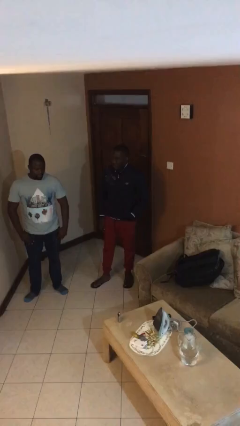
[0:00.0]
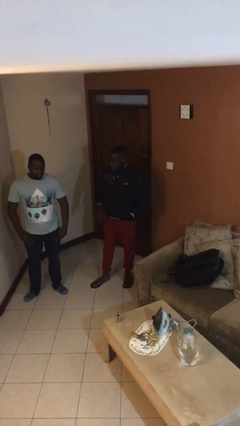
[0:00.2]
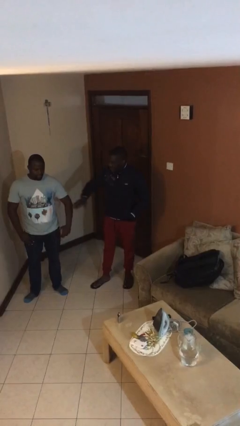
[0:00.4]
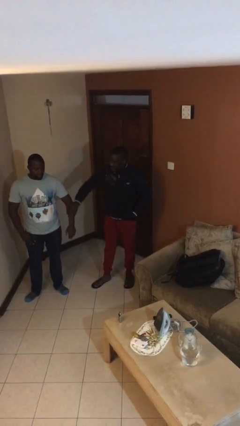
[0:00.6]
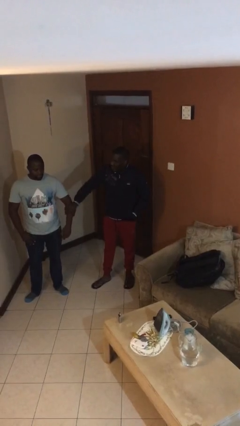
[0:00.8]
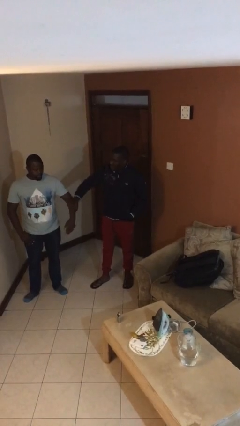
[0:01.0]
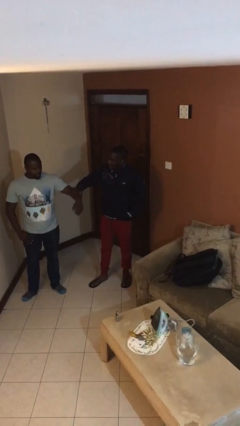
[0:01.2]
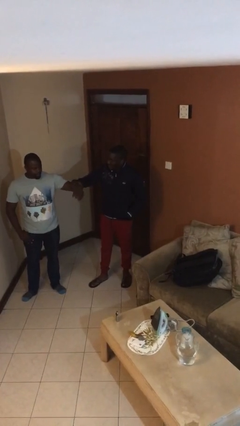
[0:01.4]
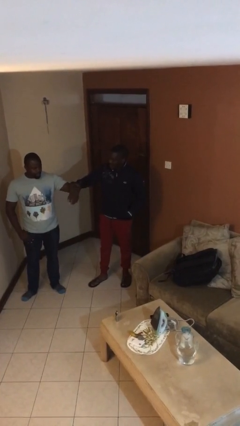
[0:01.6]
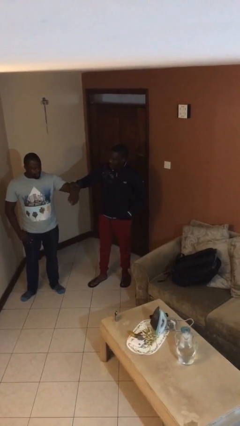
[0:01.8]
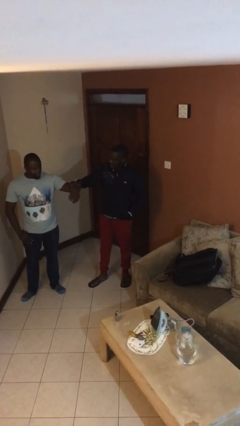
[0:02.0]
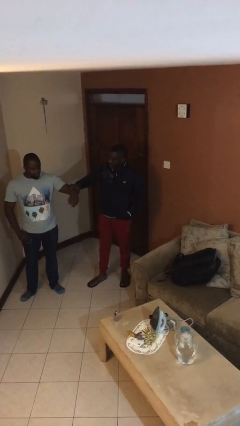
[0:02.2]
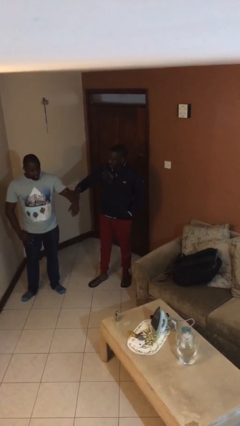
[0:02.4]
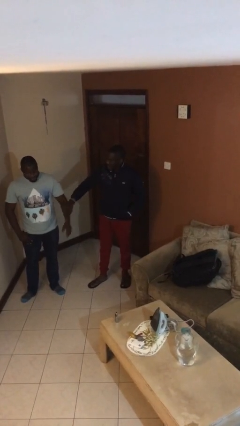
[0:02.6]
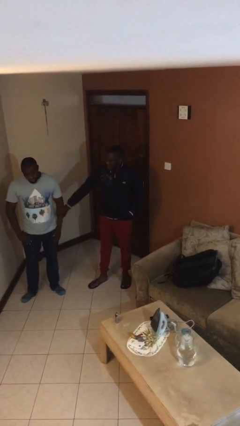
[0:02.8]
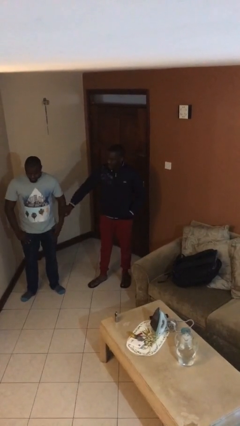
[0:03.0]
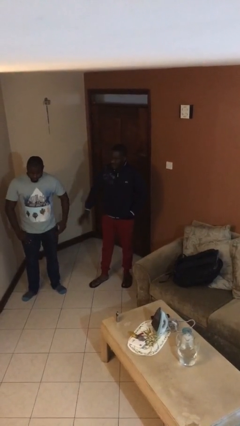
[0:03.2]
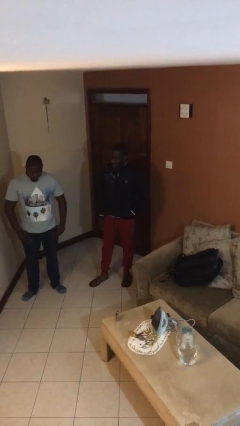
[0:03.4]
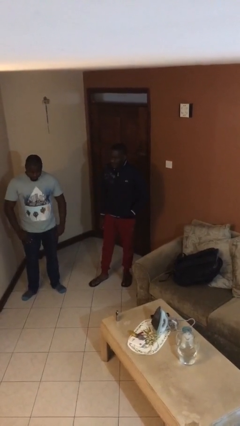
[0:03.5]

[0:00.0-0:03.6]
person grabs person by forearm

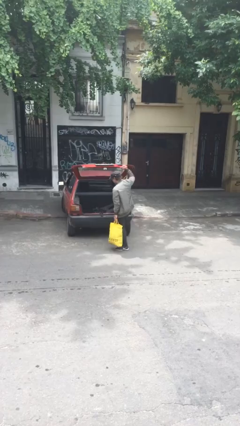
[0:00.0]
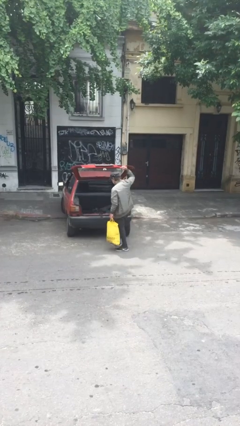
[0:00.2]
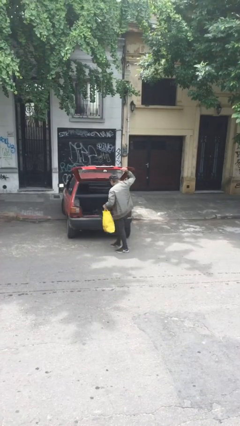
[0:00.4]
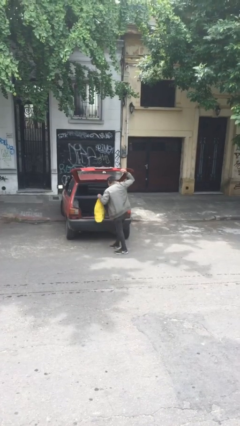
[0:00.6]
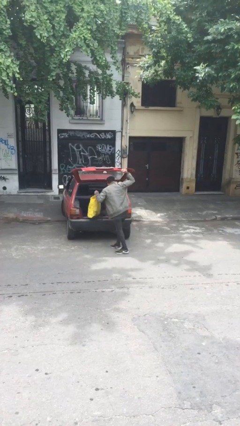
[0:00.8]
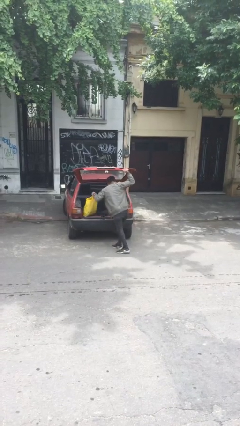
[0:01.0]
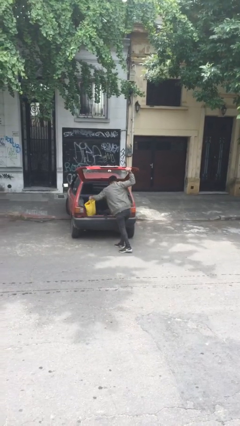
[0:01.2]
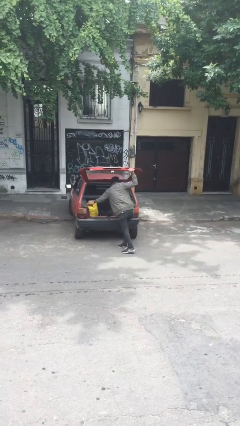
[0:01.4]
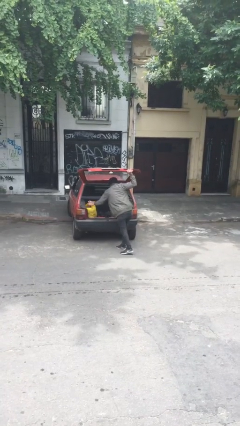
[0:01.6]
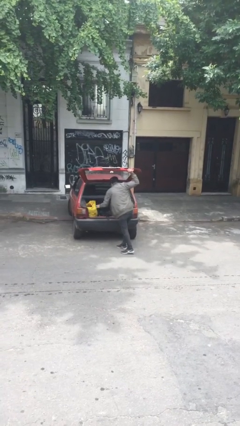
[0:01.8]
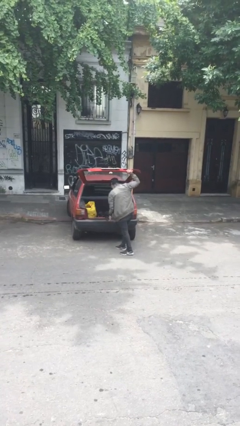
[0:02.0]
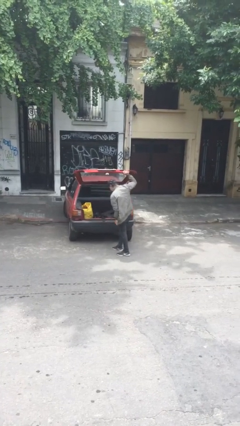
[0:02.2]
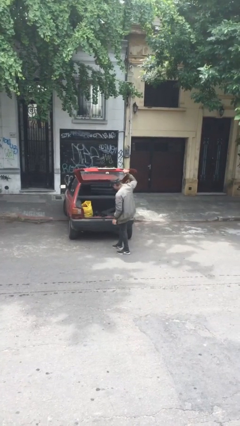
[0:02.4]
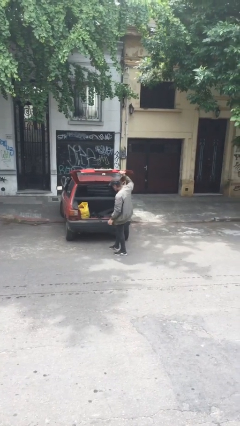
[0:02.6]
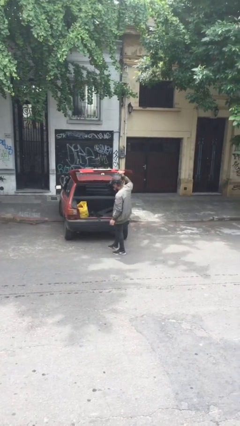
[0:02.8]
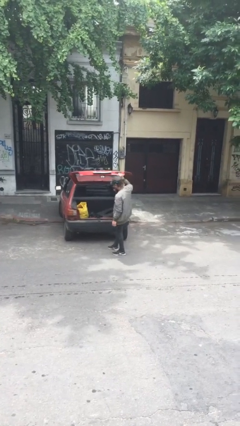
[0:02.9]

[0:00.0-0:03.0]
person loads car

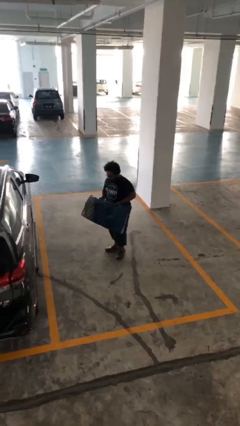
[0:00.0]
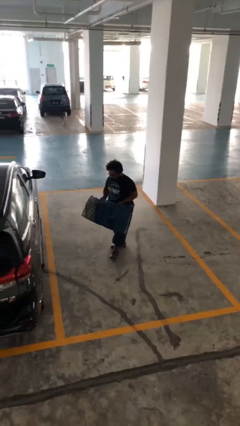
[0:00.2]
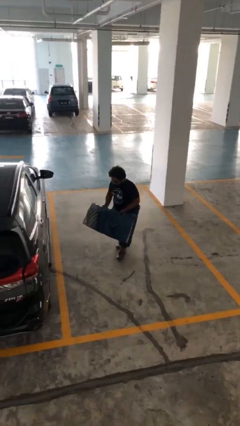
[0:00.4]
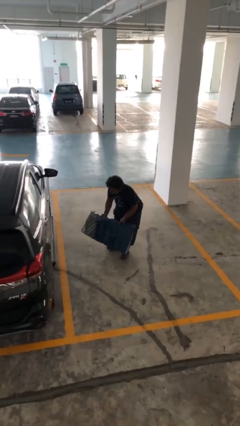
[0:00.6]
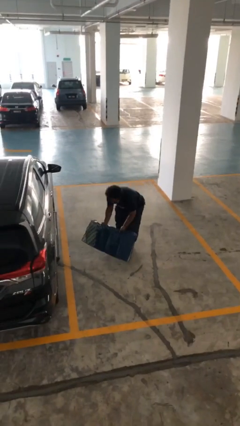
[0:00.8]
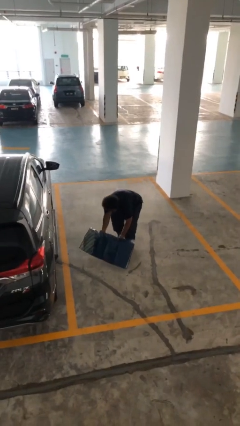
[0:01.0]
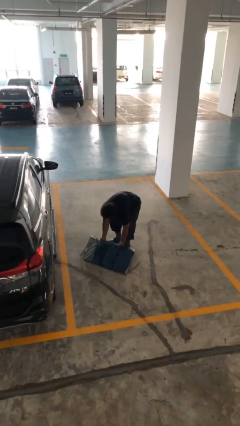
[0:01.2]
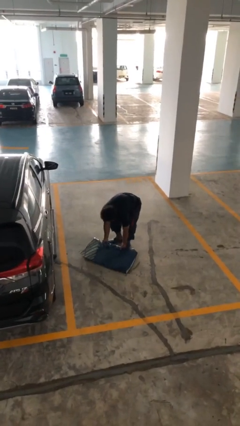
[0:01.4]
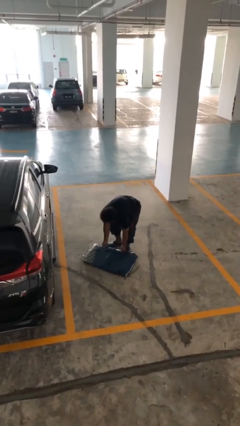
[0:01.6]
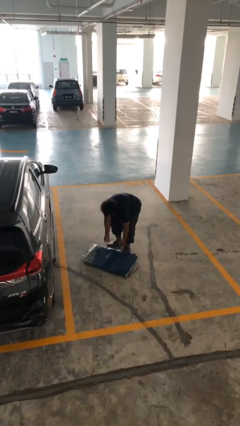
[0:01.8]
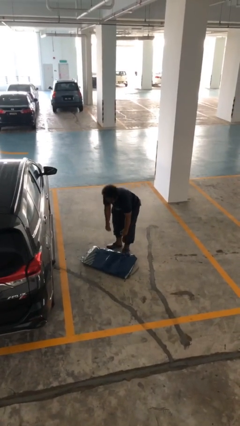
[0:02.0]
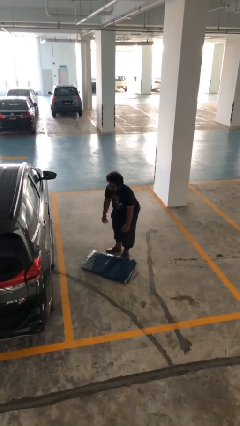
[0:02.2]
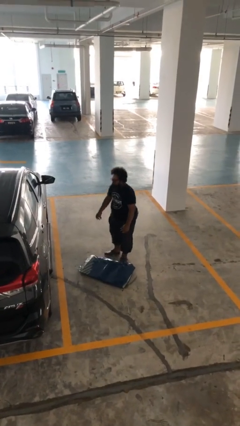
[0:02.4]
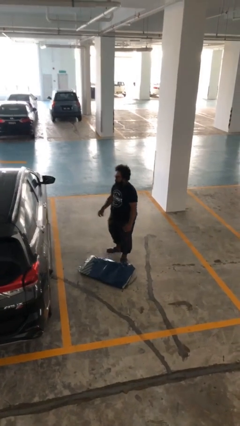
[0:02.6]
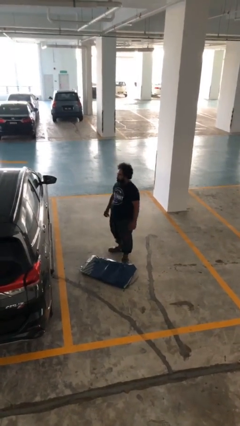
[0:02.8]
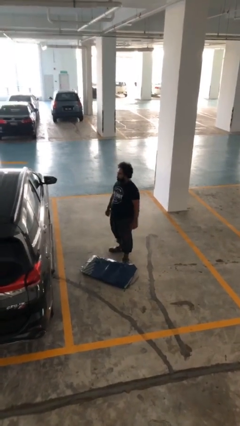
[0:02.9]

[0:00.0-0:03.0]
person puts down object on floor

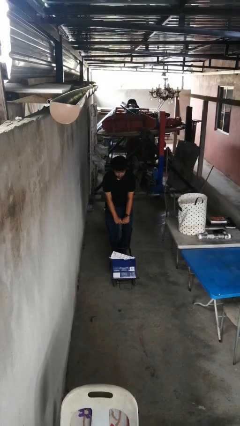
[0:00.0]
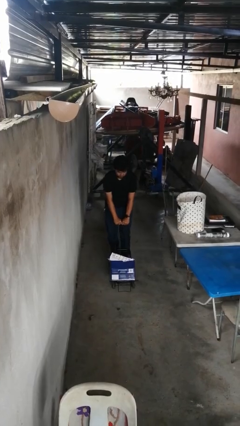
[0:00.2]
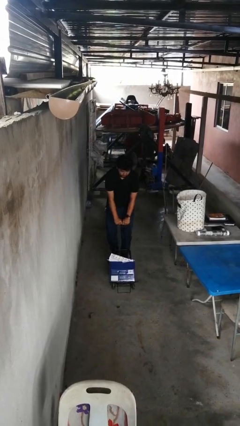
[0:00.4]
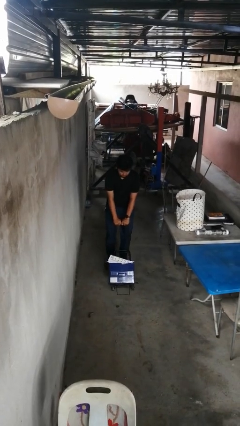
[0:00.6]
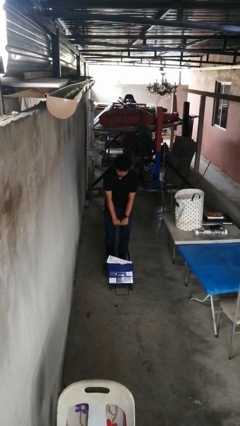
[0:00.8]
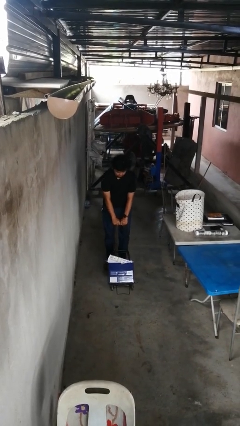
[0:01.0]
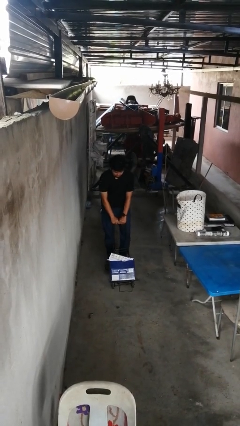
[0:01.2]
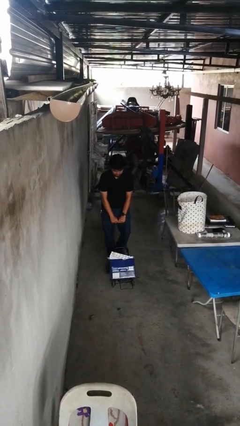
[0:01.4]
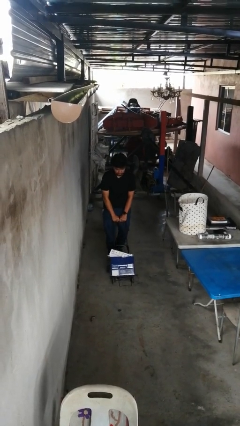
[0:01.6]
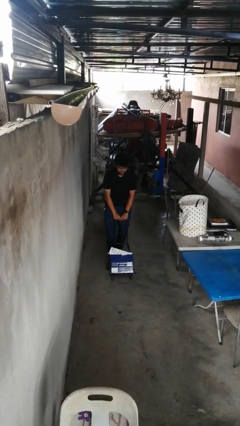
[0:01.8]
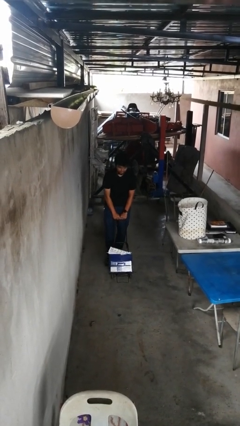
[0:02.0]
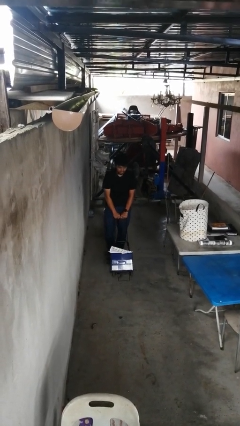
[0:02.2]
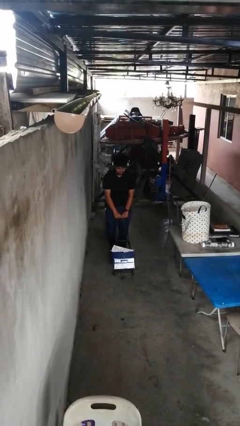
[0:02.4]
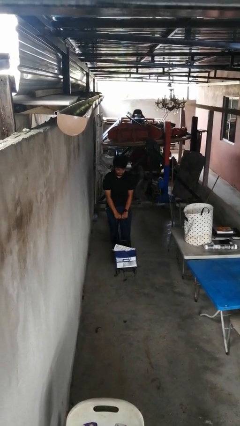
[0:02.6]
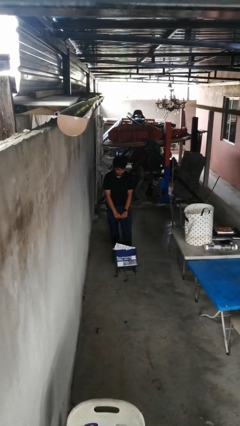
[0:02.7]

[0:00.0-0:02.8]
person pulls wheeled cart

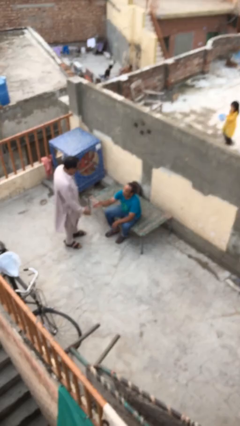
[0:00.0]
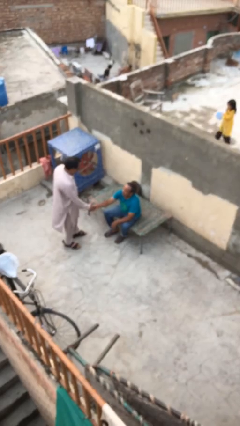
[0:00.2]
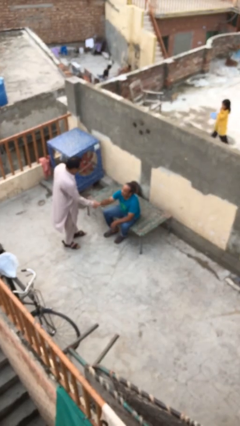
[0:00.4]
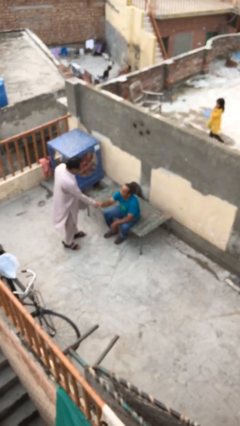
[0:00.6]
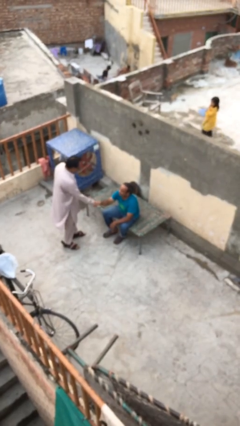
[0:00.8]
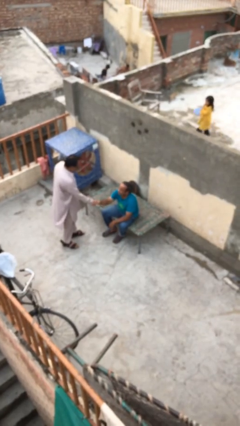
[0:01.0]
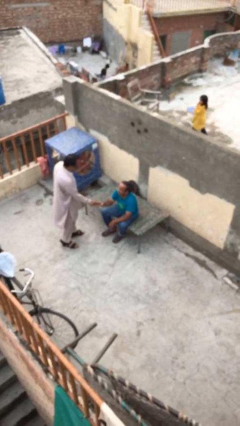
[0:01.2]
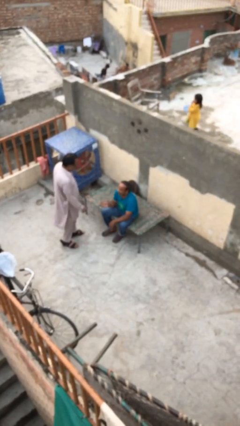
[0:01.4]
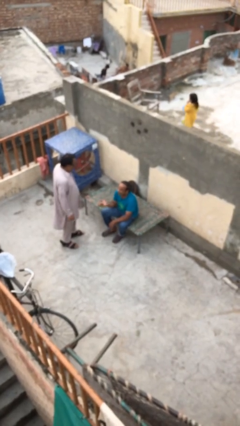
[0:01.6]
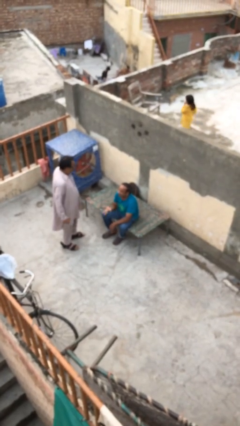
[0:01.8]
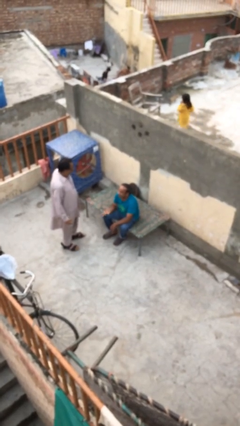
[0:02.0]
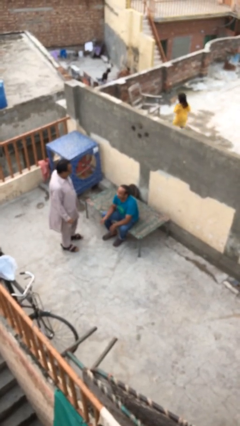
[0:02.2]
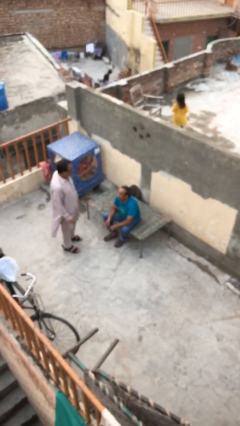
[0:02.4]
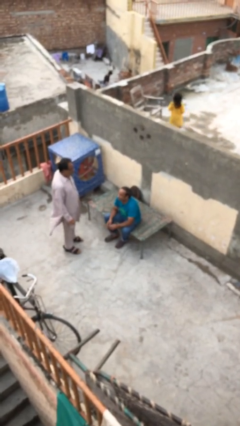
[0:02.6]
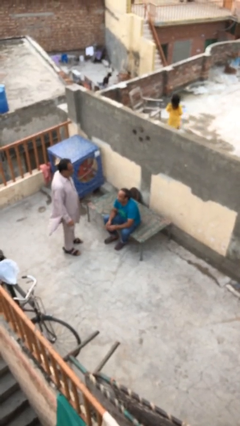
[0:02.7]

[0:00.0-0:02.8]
person shakes hand

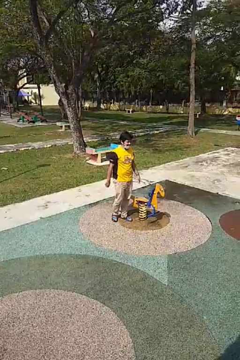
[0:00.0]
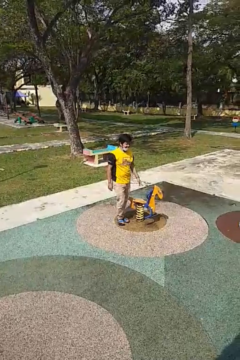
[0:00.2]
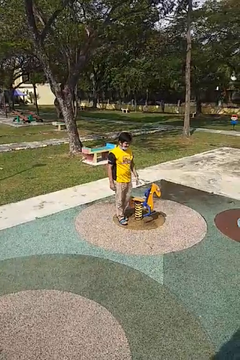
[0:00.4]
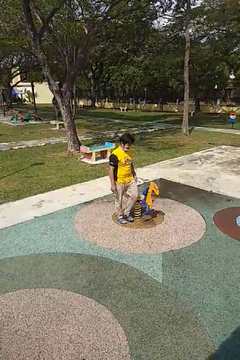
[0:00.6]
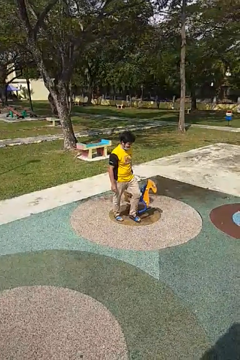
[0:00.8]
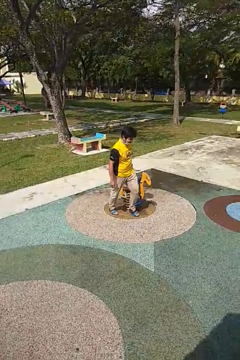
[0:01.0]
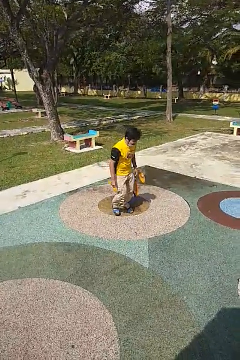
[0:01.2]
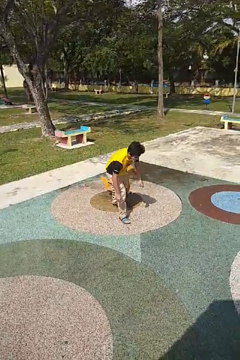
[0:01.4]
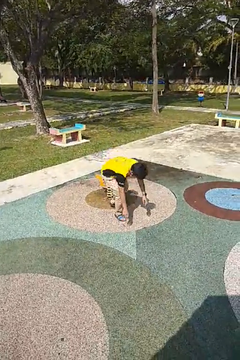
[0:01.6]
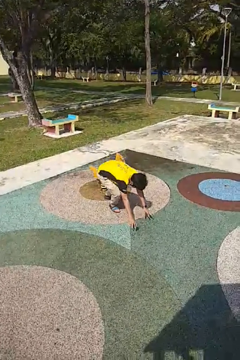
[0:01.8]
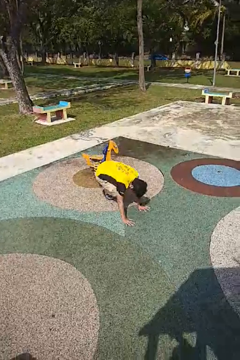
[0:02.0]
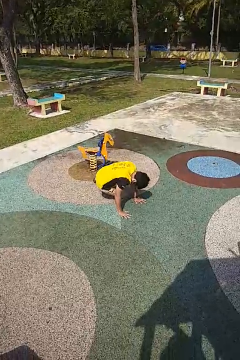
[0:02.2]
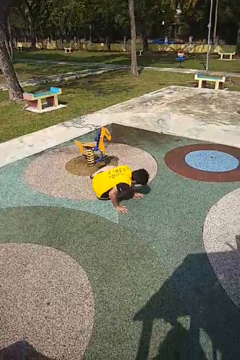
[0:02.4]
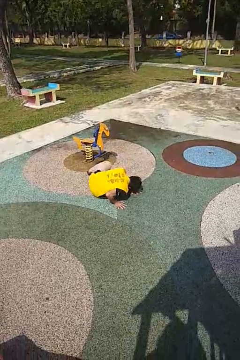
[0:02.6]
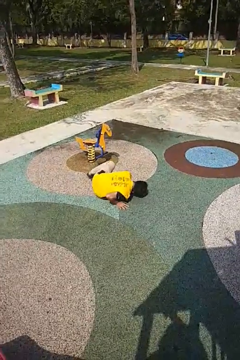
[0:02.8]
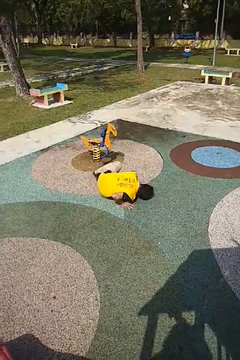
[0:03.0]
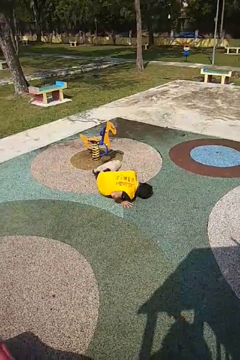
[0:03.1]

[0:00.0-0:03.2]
person trips on object on floor
